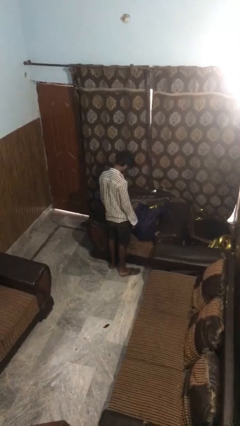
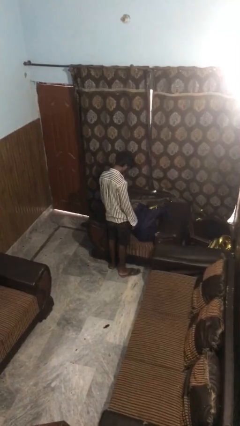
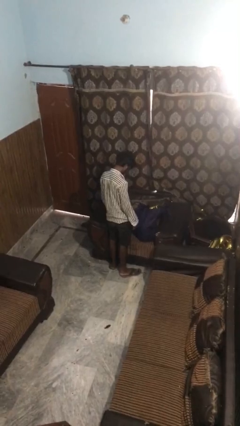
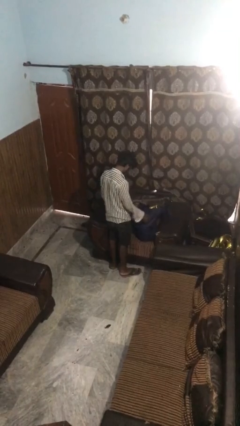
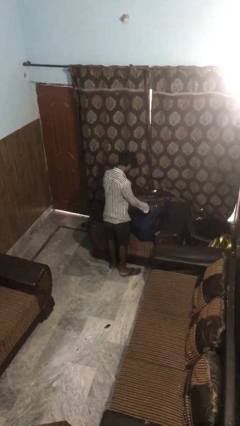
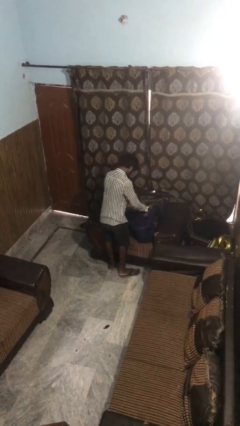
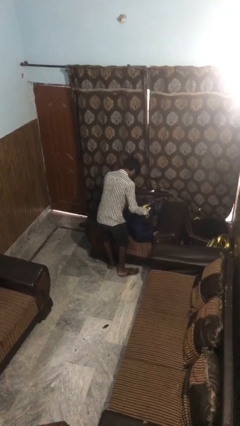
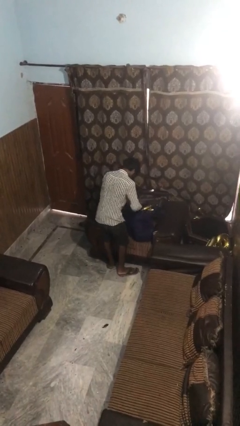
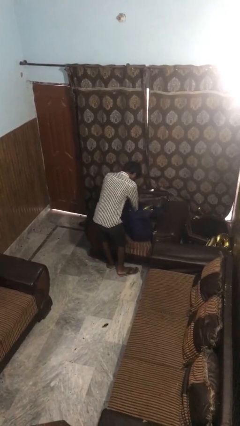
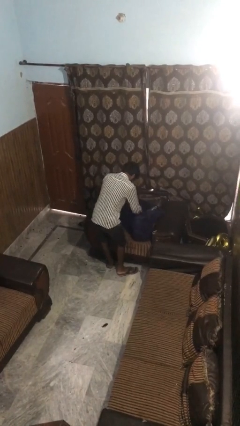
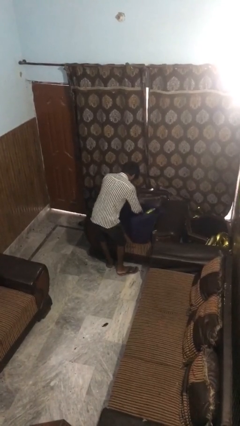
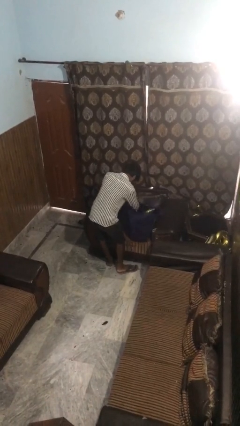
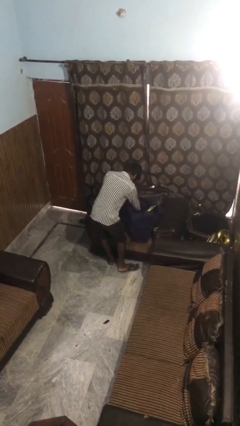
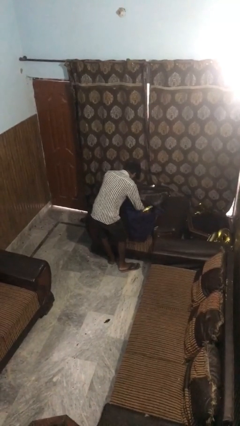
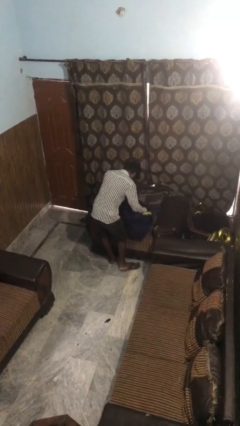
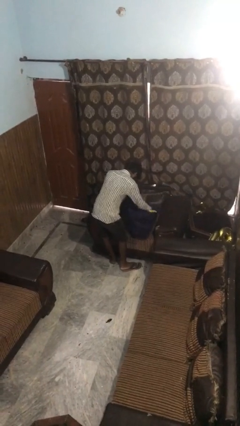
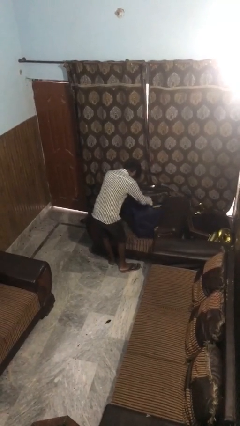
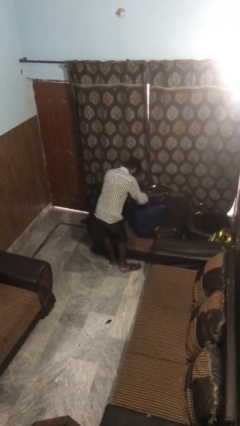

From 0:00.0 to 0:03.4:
person searches in bag

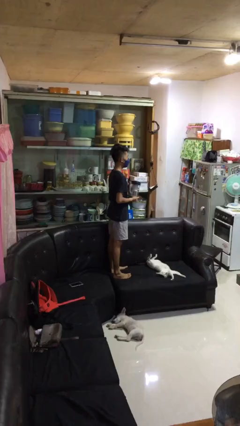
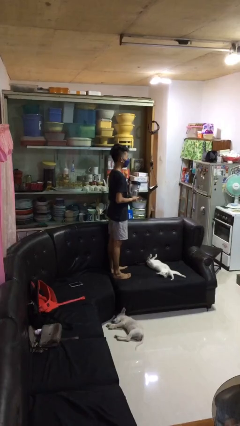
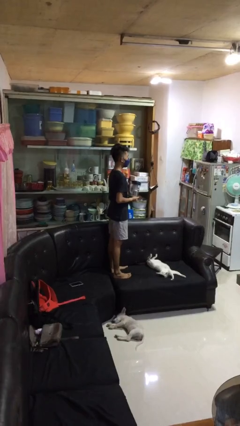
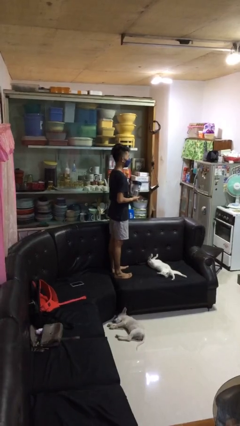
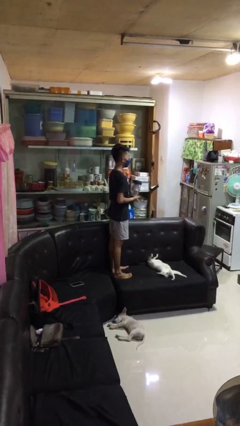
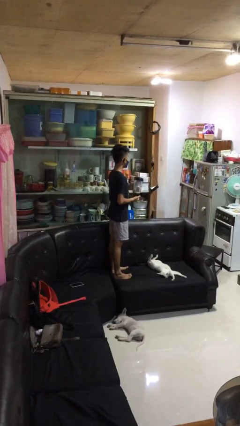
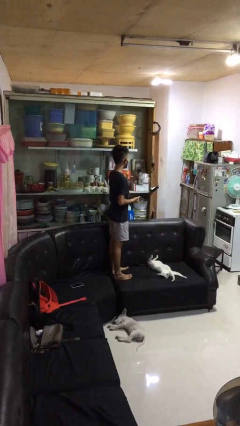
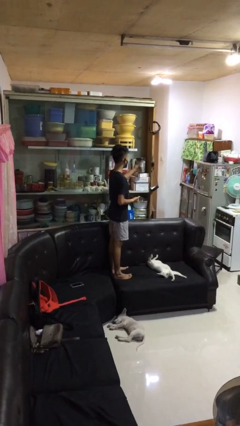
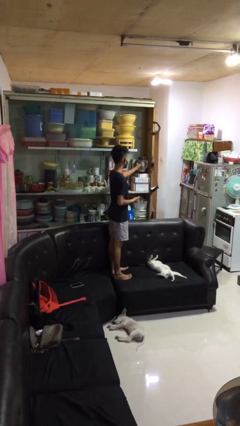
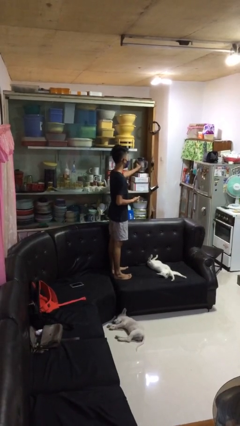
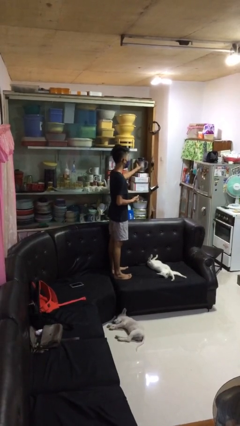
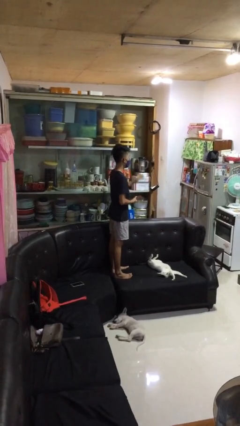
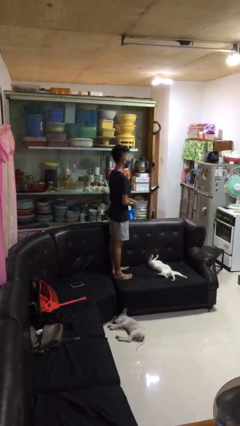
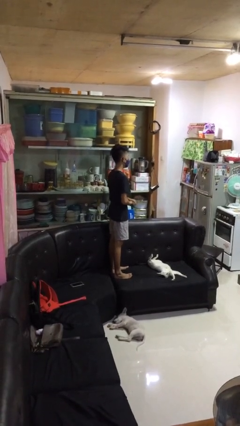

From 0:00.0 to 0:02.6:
person puts down object into cabinet

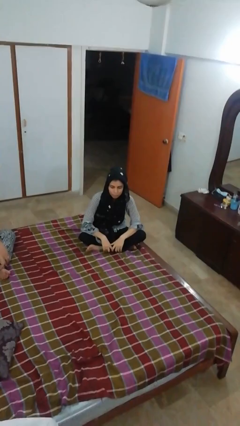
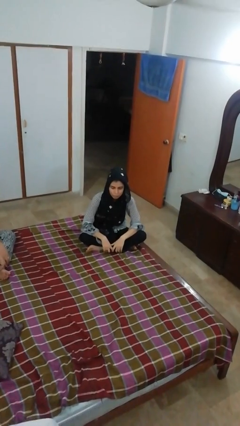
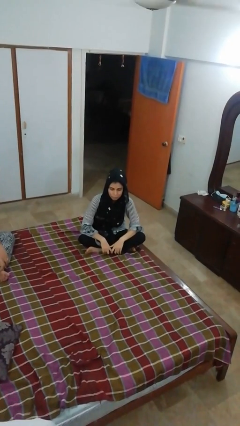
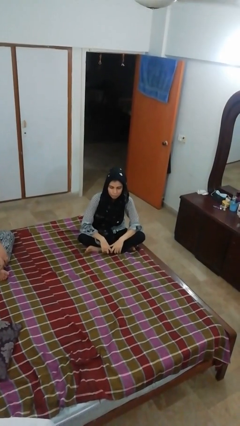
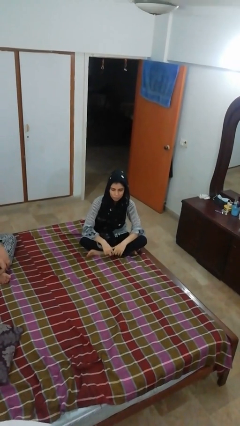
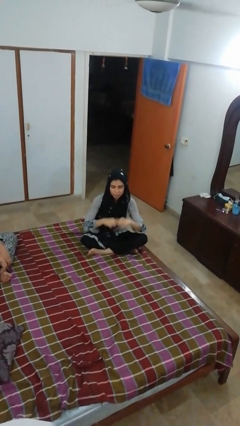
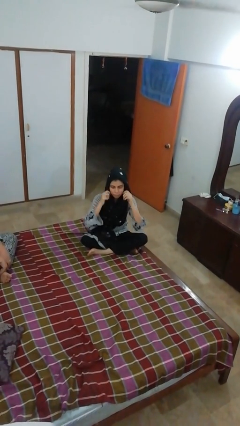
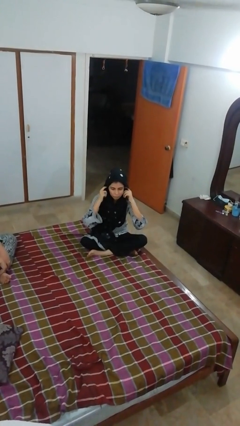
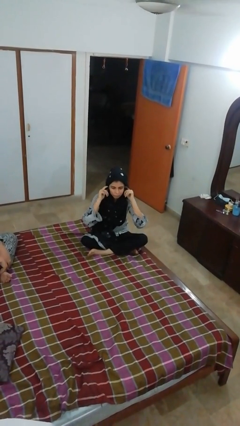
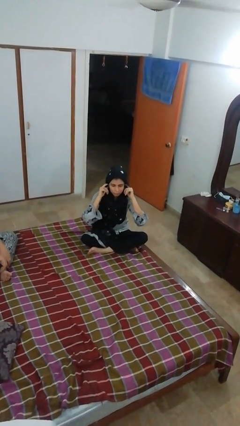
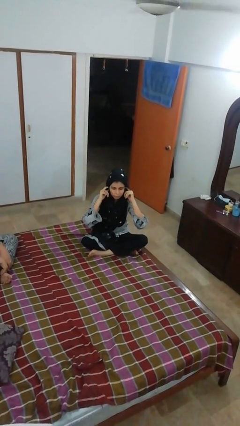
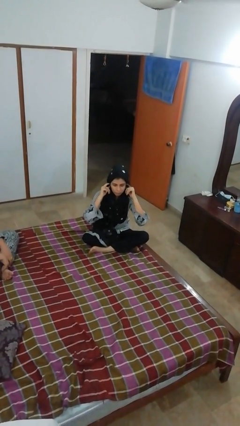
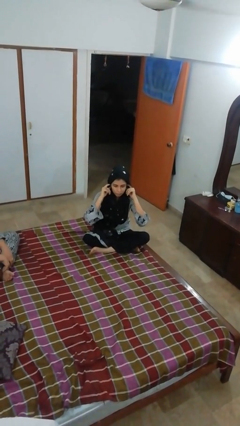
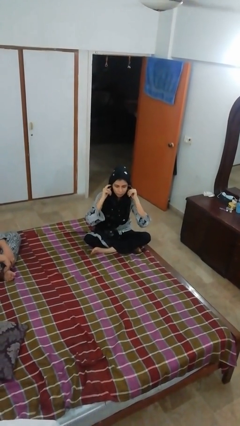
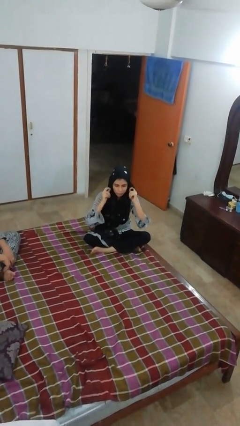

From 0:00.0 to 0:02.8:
person puts fingers in ear

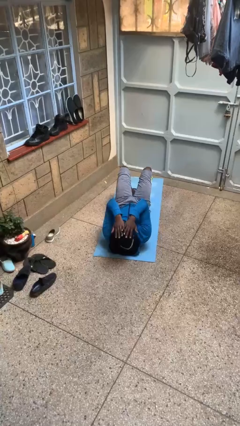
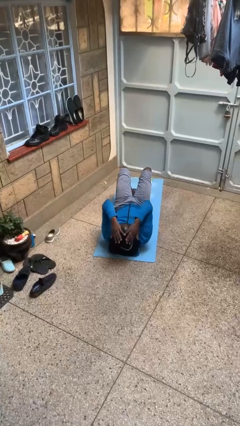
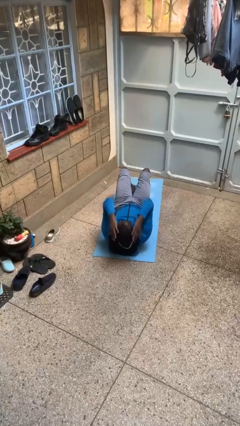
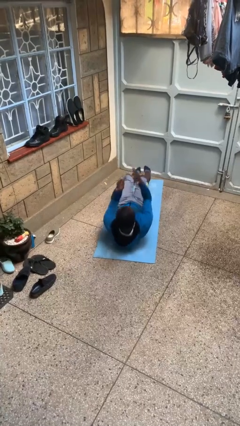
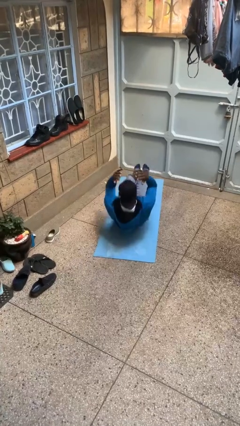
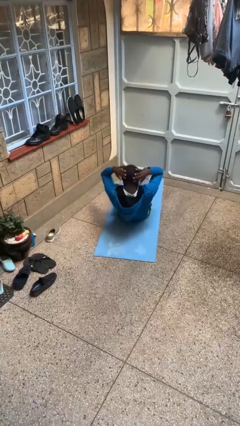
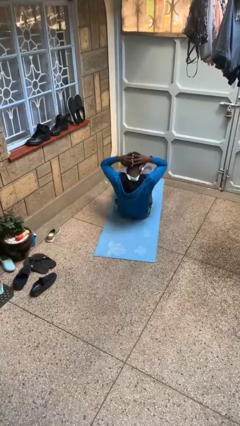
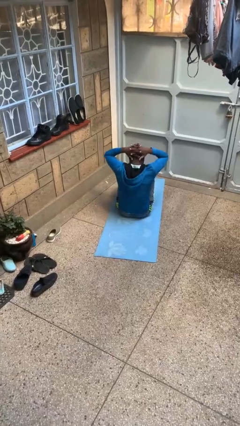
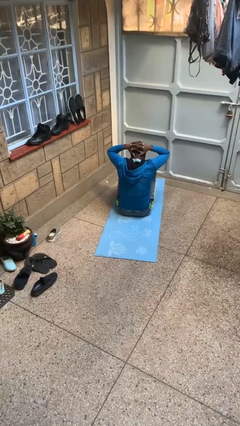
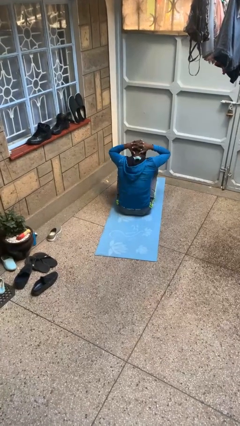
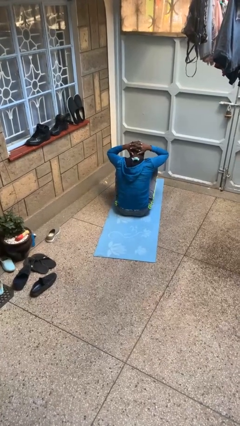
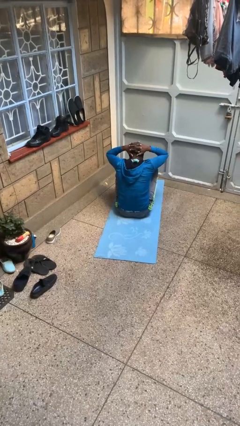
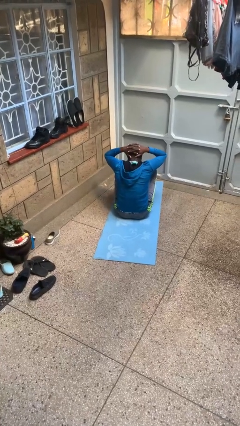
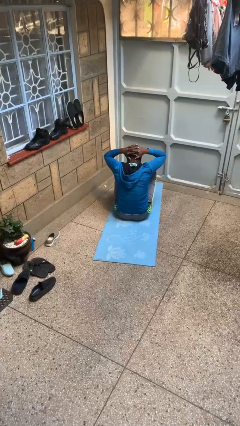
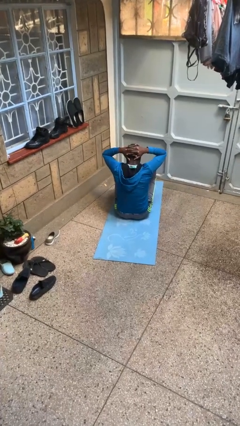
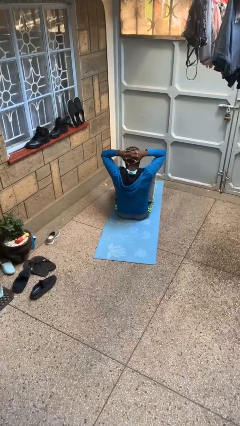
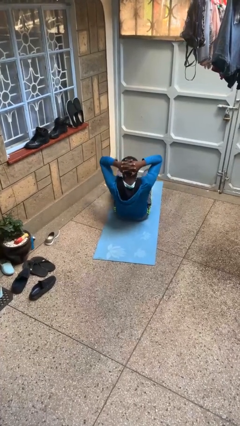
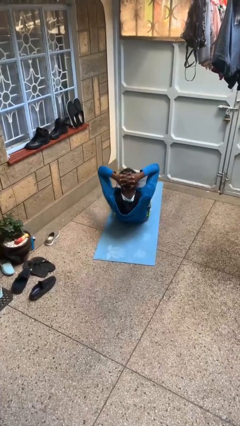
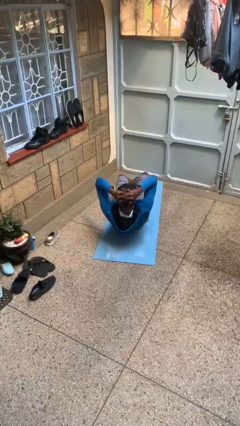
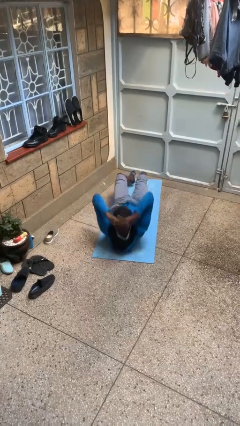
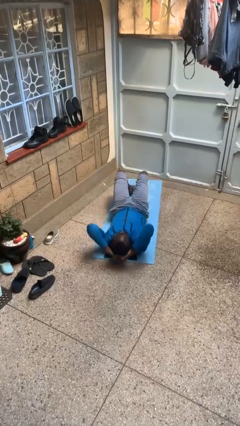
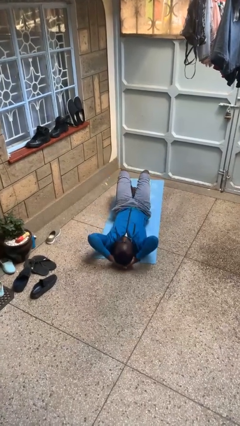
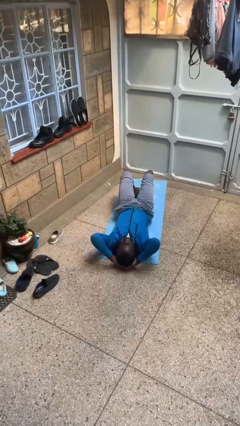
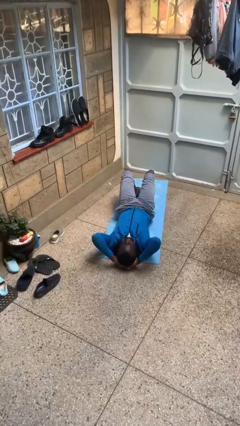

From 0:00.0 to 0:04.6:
person exercises with situp

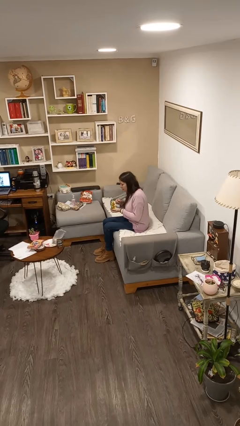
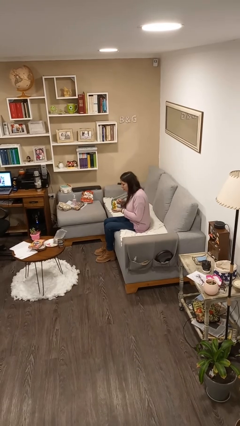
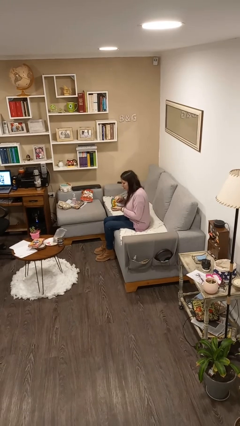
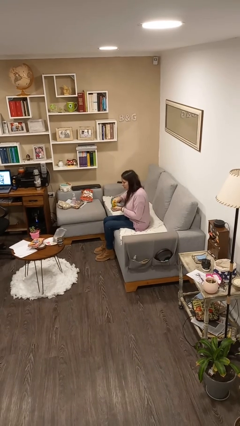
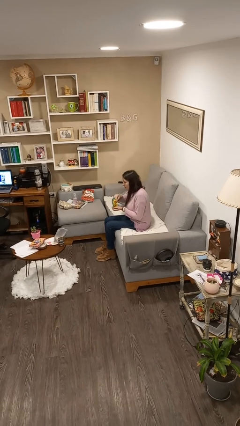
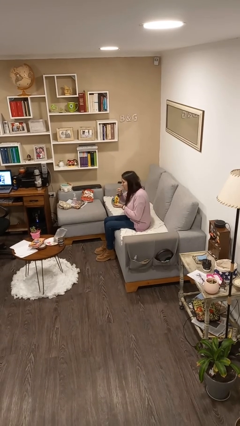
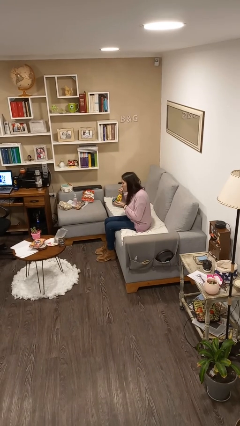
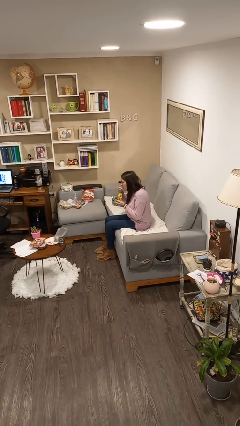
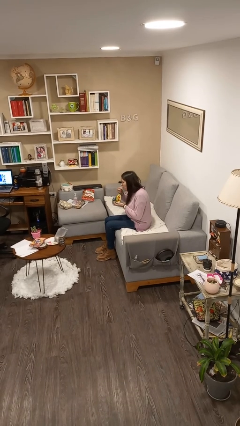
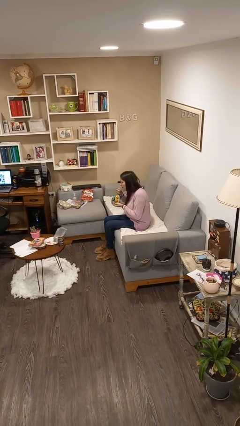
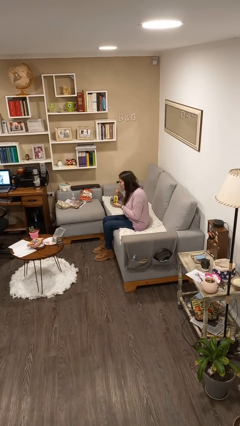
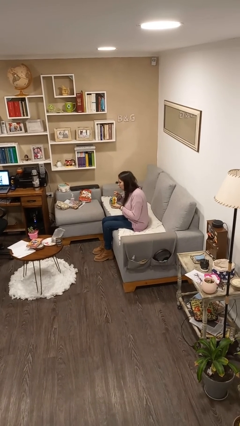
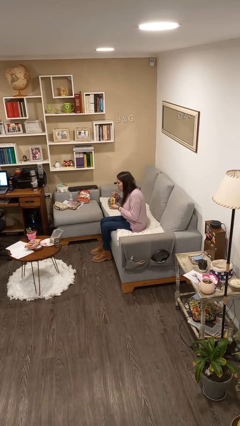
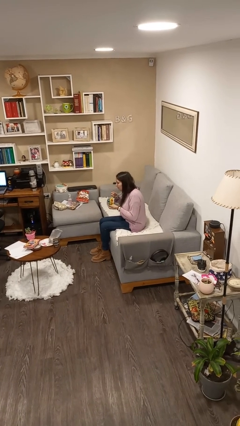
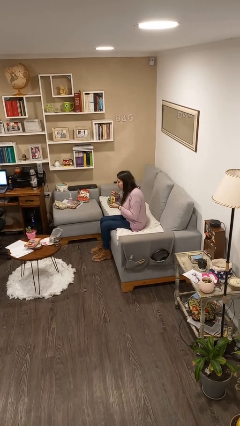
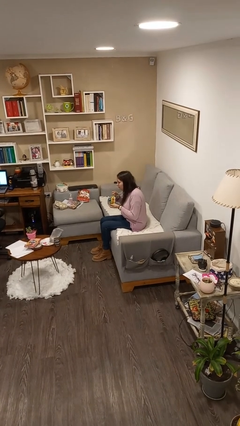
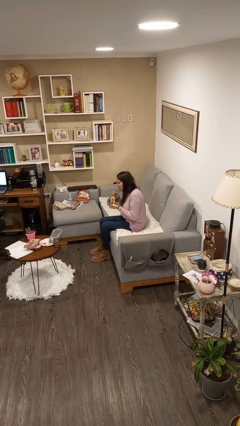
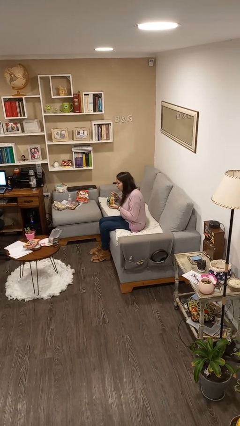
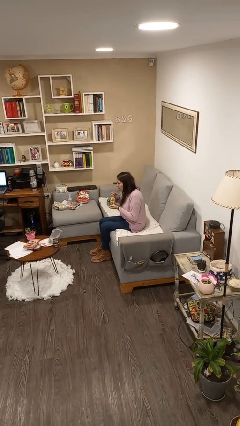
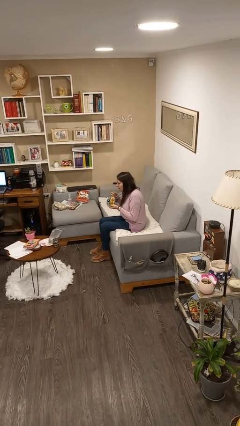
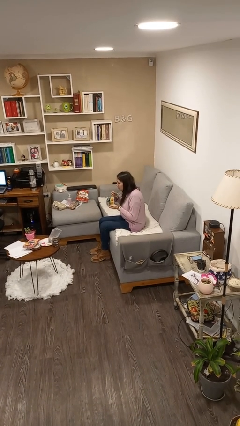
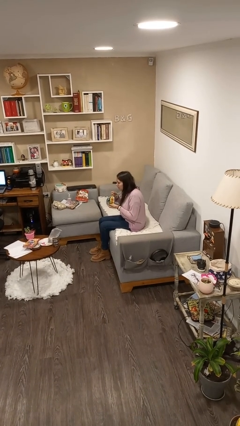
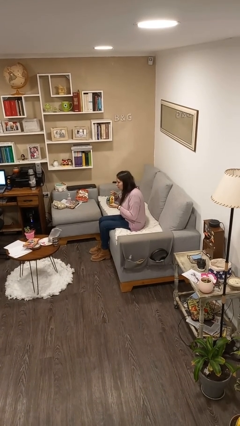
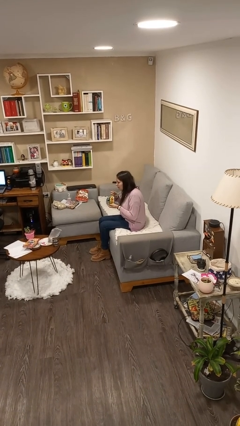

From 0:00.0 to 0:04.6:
person eats snack from bag
